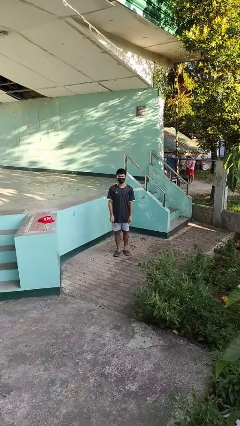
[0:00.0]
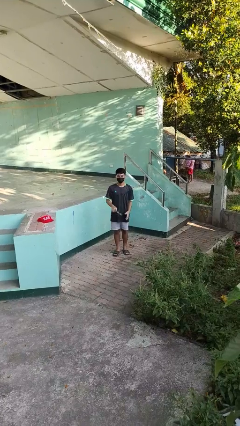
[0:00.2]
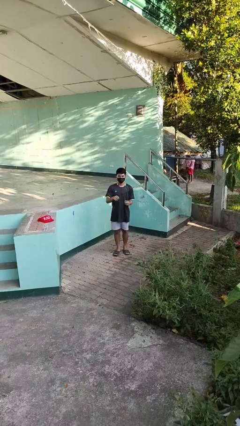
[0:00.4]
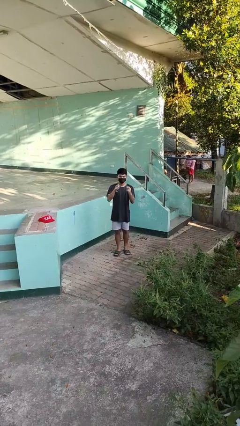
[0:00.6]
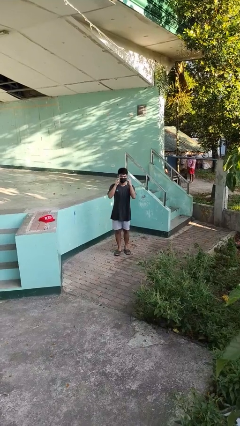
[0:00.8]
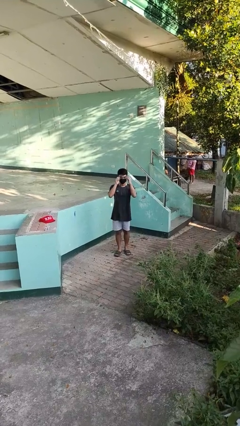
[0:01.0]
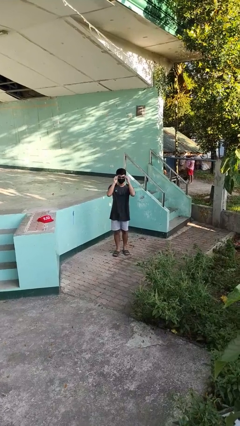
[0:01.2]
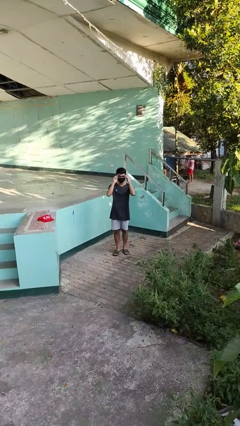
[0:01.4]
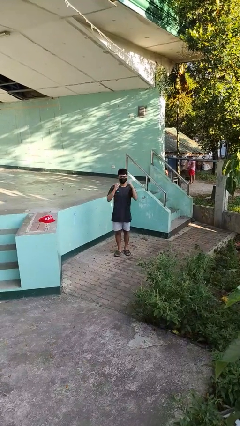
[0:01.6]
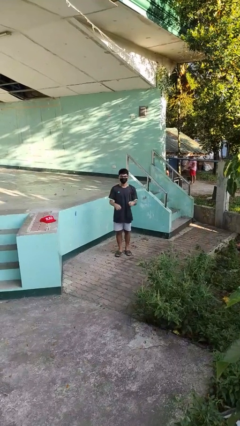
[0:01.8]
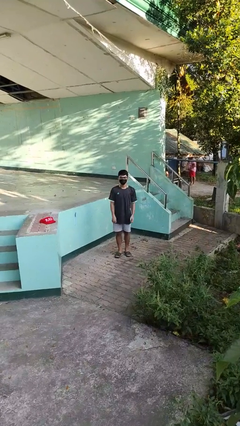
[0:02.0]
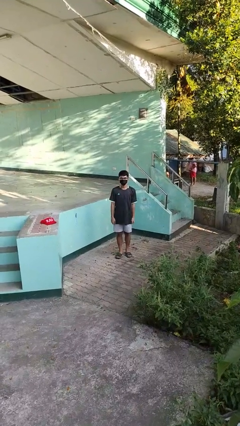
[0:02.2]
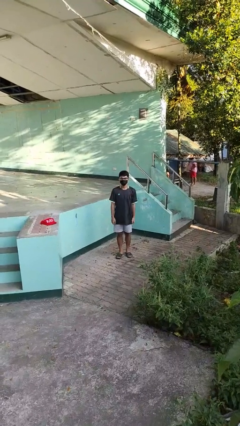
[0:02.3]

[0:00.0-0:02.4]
person puts on glasses

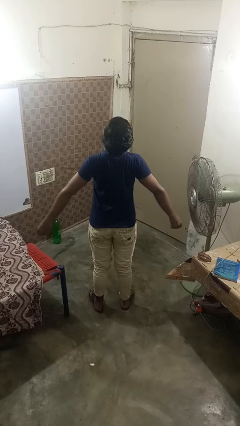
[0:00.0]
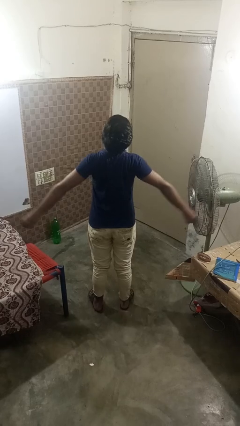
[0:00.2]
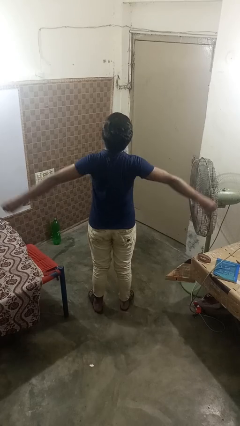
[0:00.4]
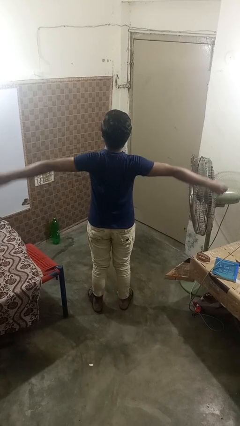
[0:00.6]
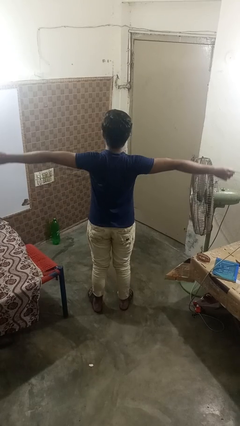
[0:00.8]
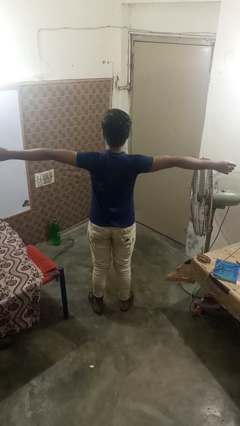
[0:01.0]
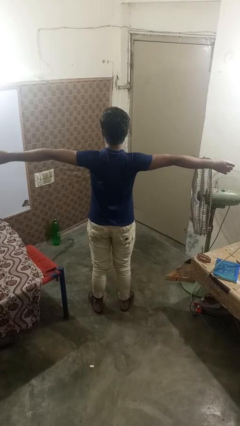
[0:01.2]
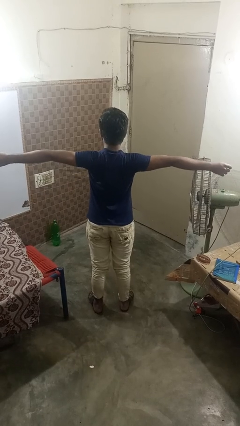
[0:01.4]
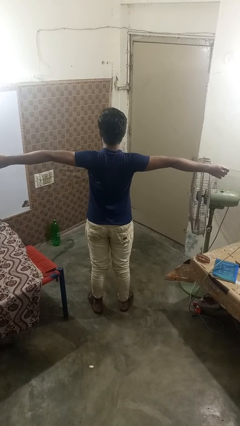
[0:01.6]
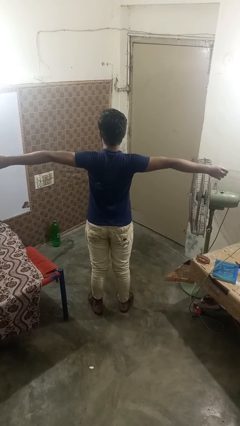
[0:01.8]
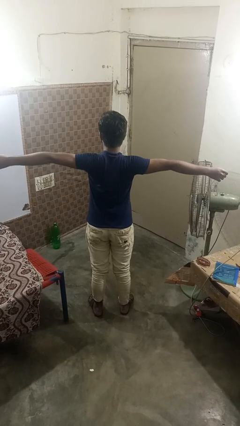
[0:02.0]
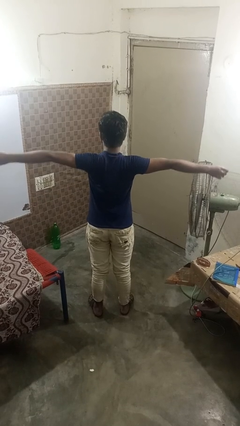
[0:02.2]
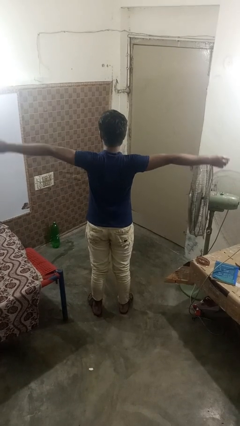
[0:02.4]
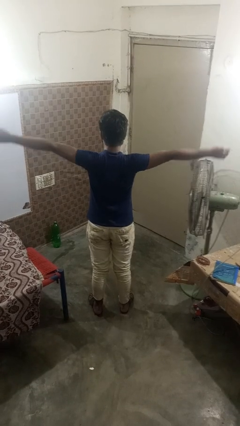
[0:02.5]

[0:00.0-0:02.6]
person stretches arms to side

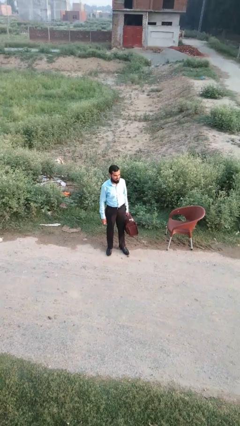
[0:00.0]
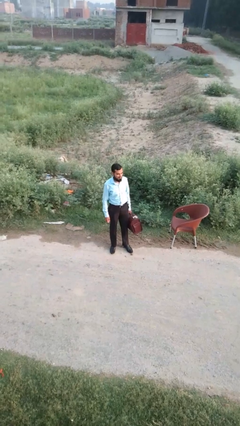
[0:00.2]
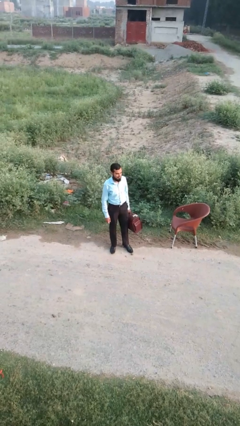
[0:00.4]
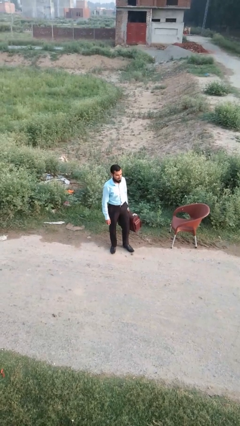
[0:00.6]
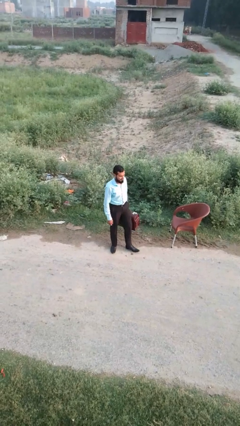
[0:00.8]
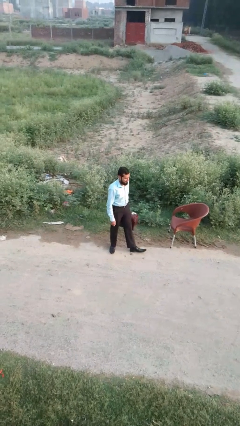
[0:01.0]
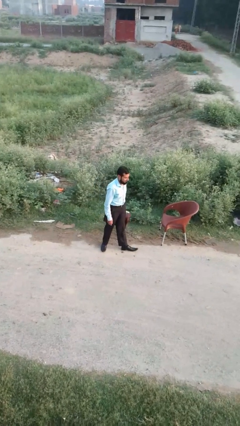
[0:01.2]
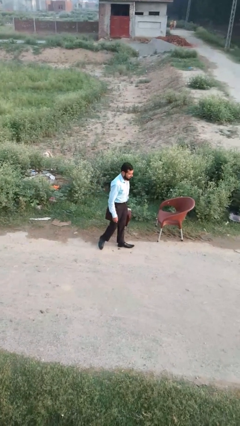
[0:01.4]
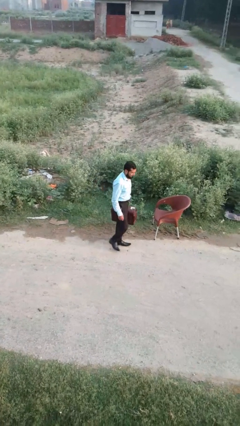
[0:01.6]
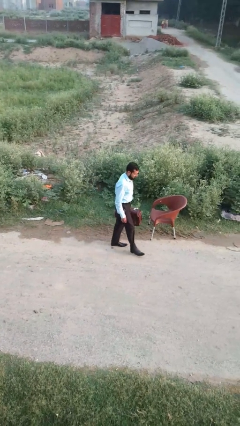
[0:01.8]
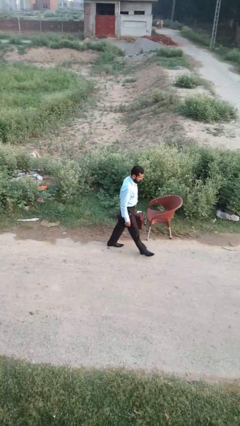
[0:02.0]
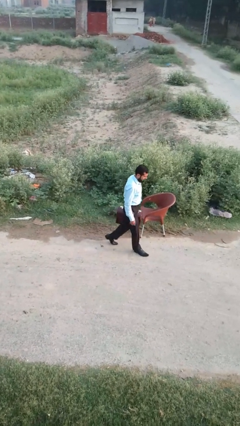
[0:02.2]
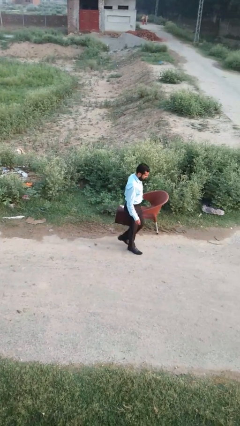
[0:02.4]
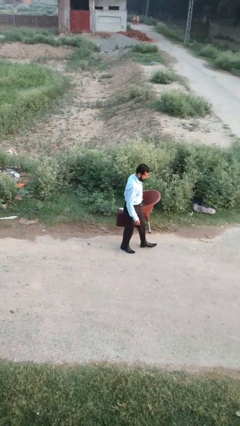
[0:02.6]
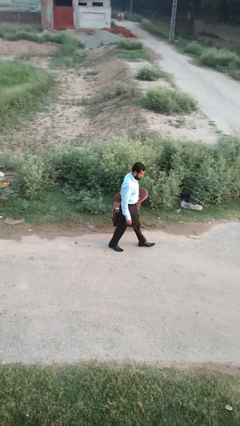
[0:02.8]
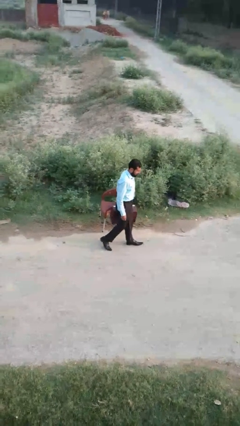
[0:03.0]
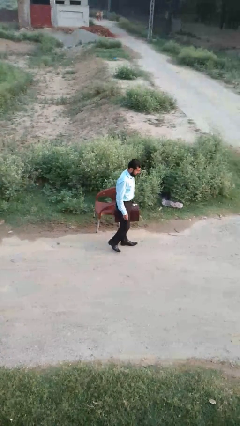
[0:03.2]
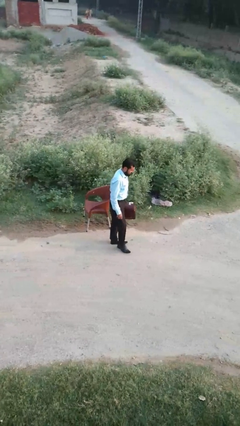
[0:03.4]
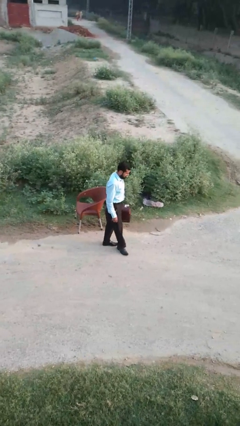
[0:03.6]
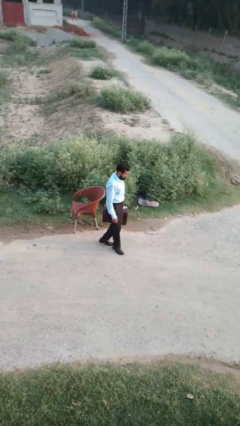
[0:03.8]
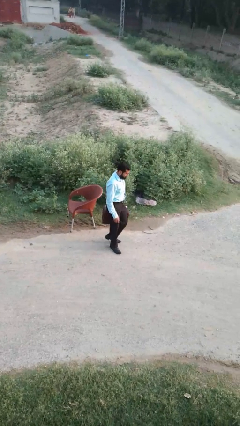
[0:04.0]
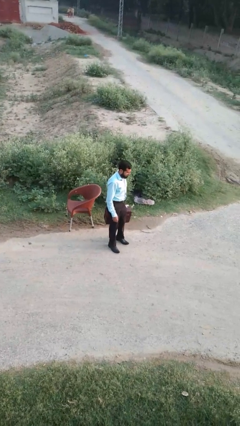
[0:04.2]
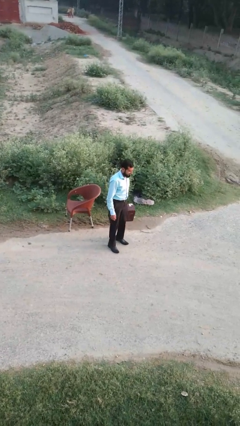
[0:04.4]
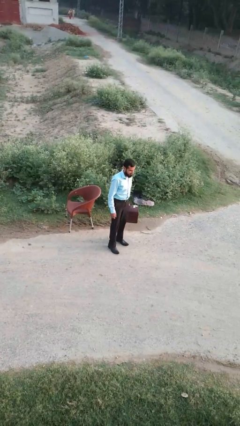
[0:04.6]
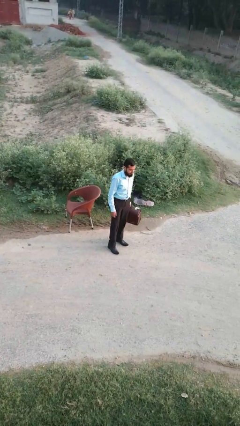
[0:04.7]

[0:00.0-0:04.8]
person carries groceries

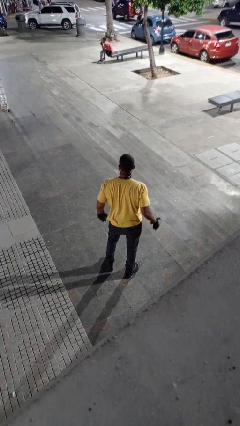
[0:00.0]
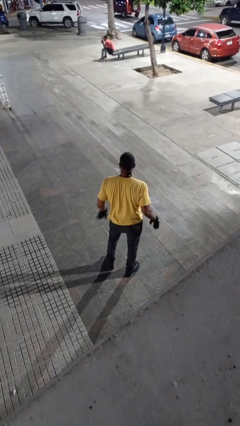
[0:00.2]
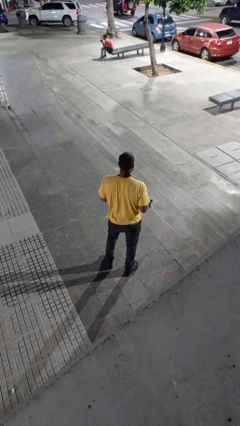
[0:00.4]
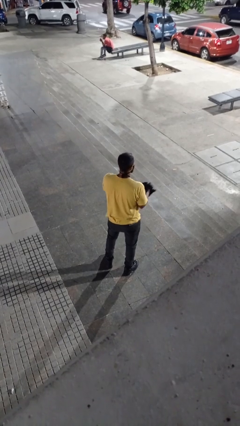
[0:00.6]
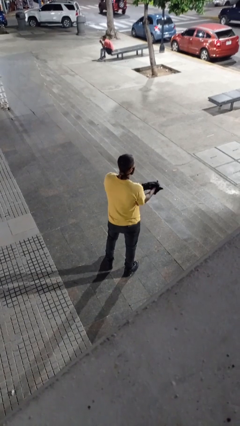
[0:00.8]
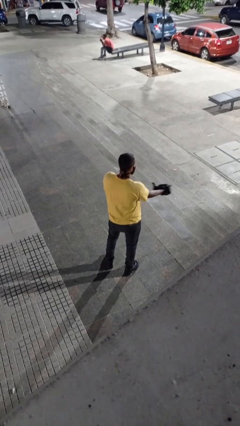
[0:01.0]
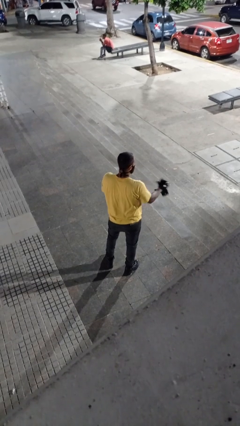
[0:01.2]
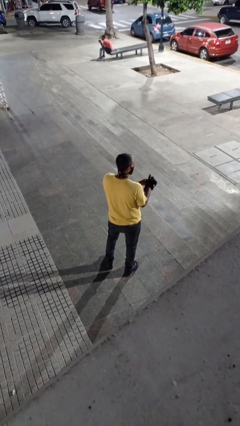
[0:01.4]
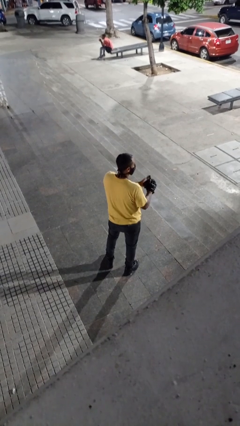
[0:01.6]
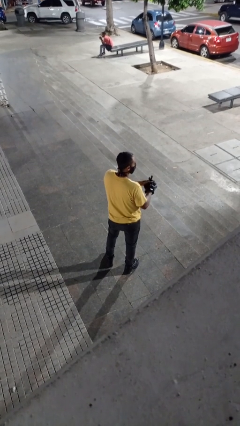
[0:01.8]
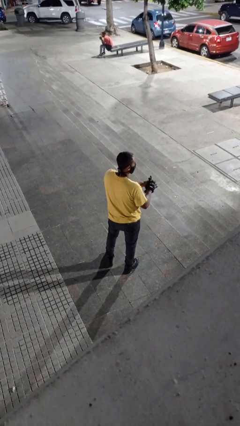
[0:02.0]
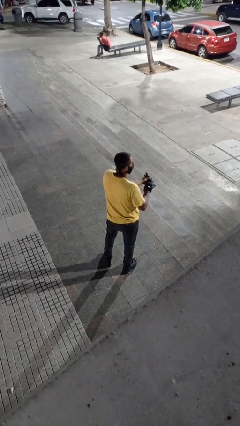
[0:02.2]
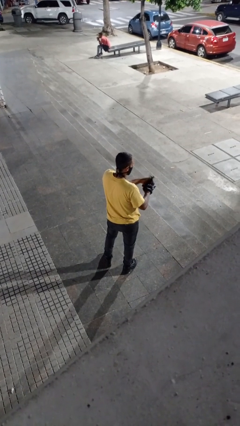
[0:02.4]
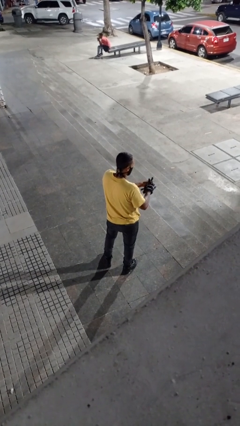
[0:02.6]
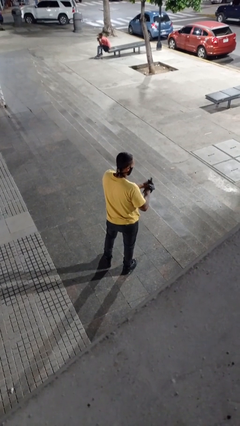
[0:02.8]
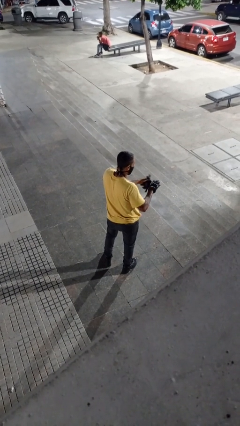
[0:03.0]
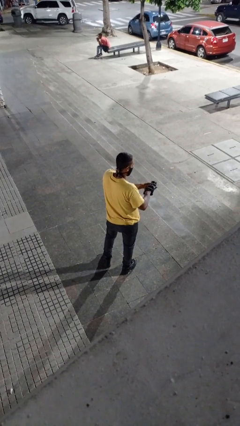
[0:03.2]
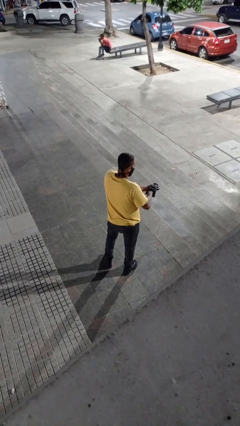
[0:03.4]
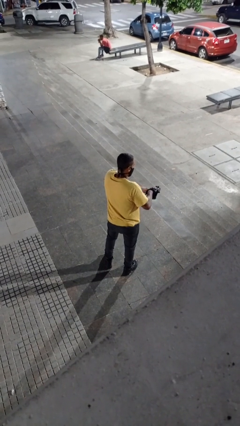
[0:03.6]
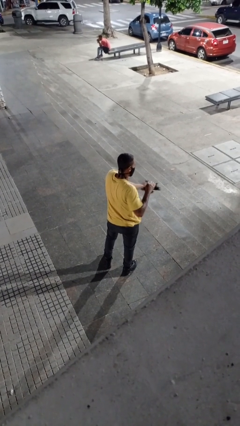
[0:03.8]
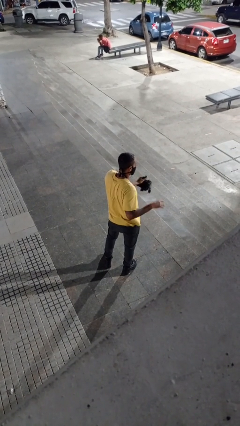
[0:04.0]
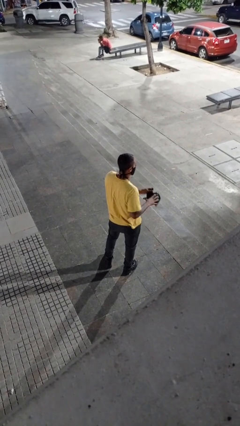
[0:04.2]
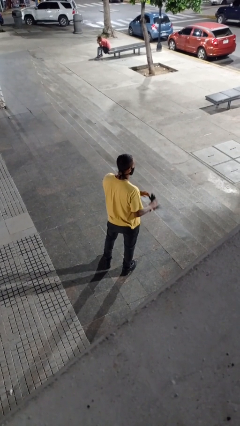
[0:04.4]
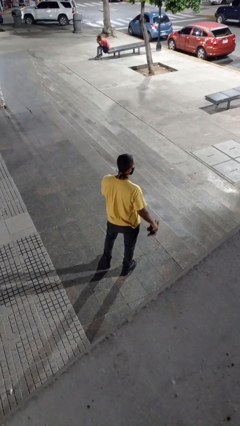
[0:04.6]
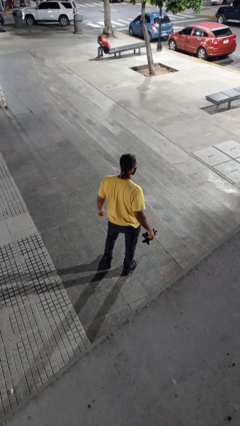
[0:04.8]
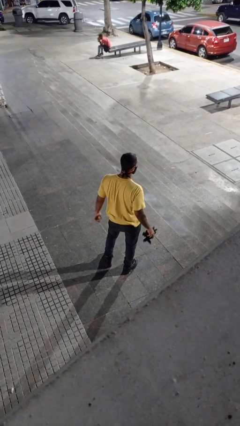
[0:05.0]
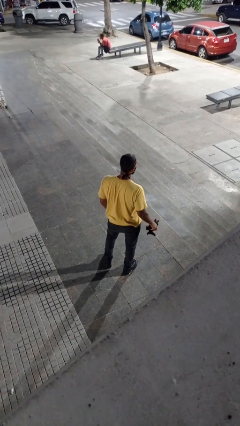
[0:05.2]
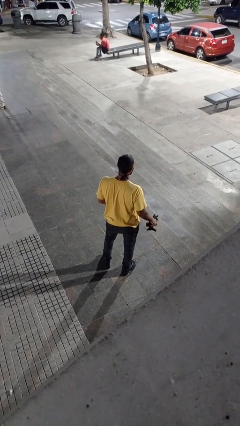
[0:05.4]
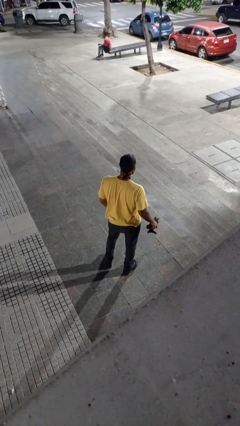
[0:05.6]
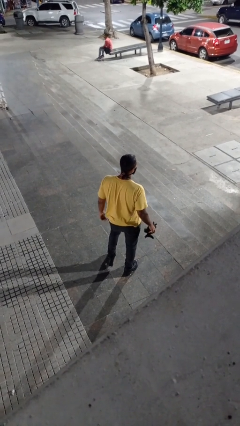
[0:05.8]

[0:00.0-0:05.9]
person takes off gloves

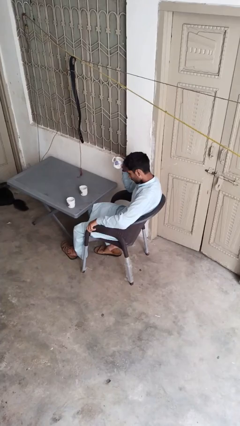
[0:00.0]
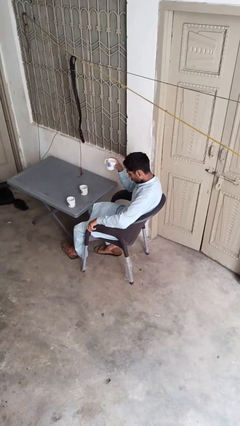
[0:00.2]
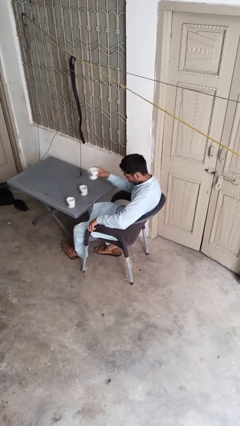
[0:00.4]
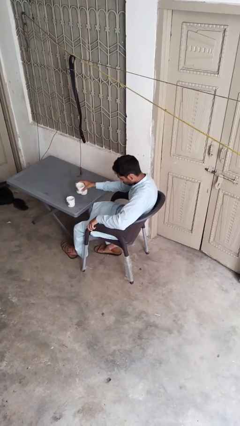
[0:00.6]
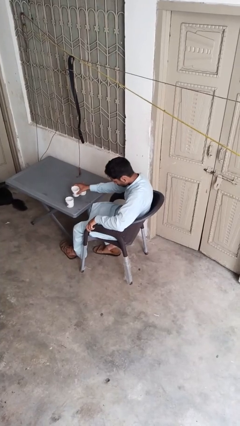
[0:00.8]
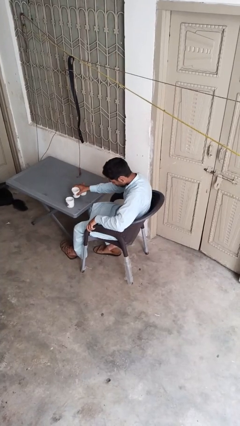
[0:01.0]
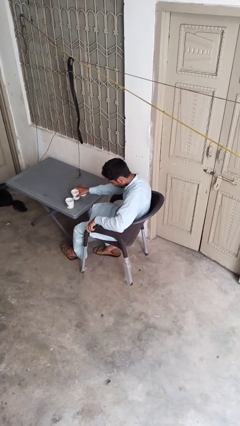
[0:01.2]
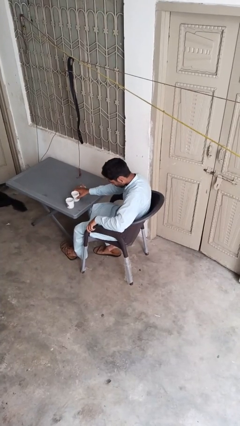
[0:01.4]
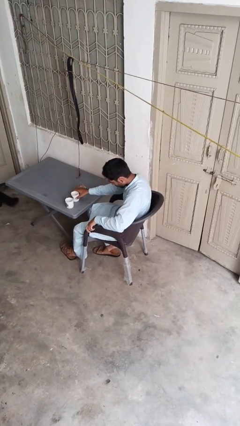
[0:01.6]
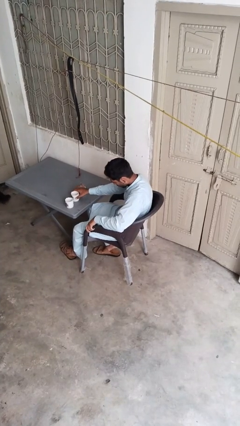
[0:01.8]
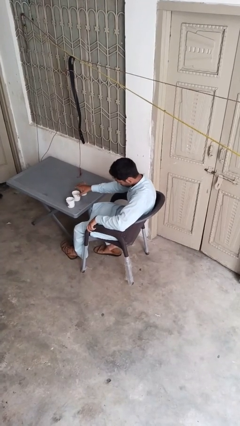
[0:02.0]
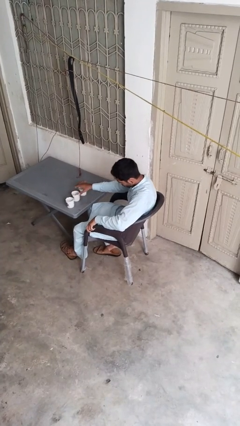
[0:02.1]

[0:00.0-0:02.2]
person puts down object on table
